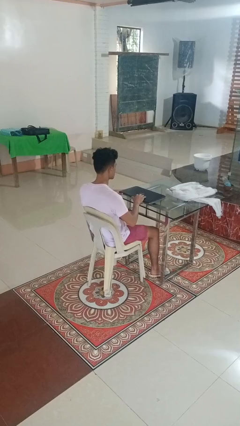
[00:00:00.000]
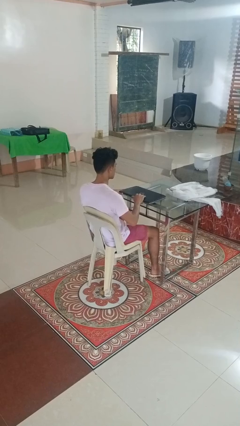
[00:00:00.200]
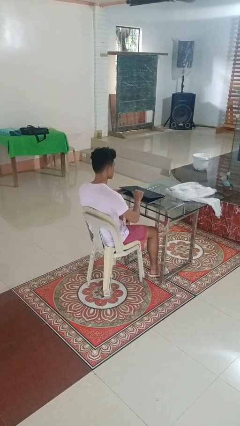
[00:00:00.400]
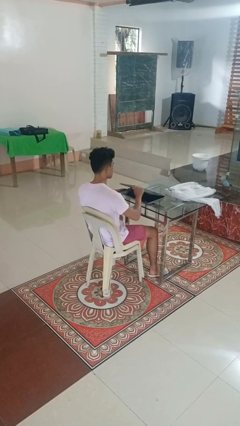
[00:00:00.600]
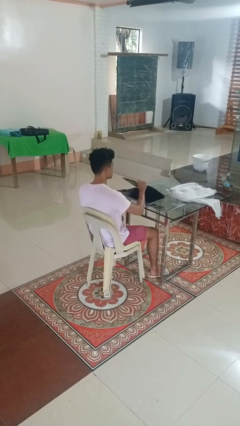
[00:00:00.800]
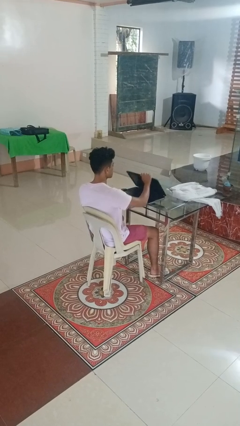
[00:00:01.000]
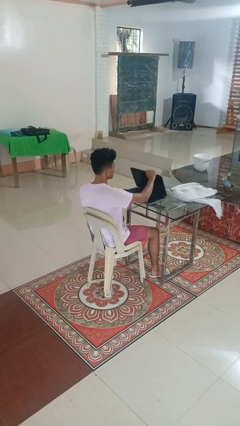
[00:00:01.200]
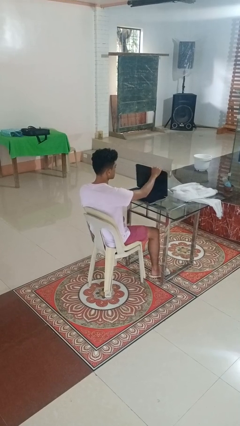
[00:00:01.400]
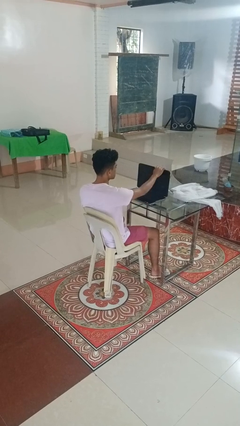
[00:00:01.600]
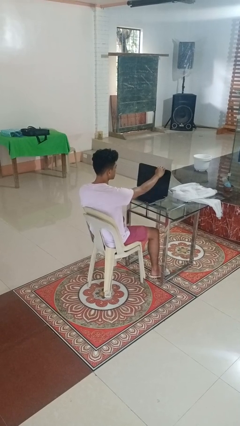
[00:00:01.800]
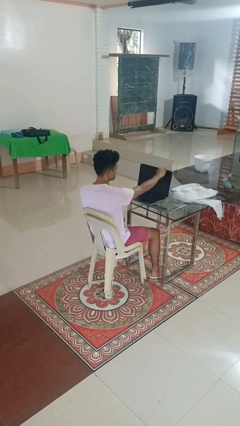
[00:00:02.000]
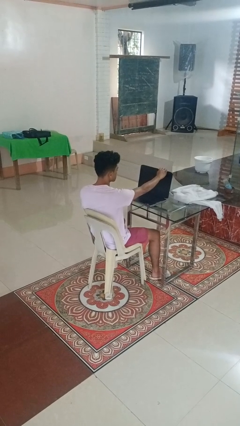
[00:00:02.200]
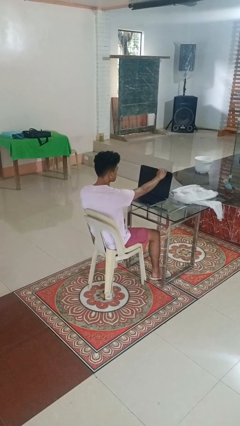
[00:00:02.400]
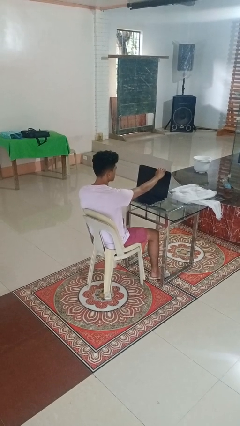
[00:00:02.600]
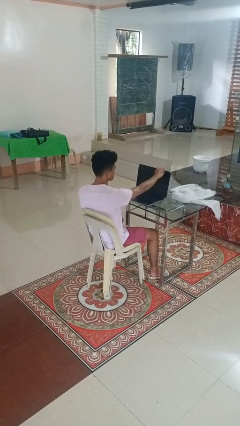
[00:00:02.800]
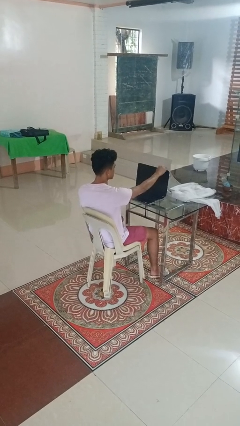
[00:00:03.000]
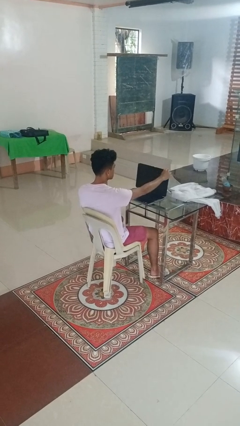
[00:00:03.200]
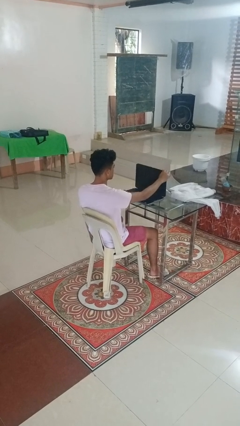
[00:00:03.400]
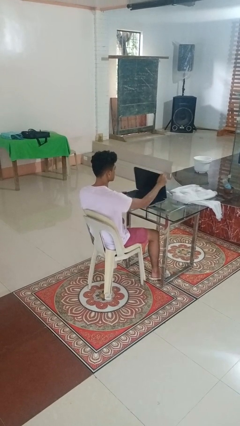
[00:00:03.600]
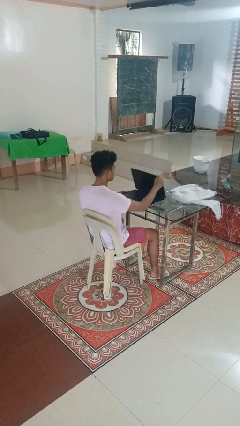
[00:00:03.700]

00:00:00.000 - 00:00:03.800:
person opens laptop

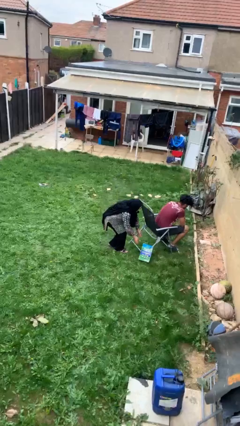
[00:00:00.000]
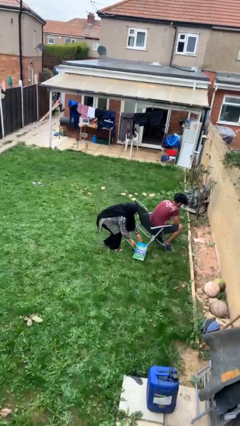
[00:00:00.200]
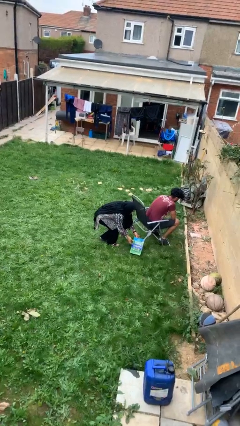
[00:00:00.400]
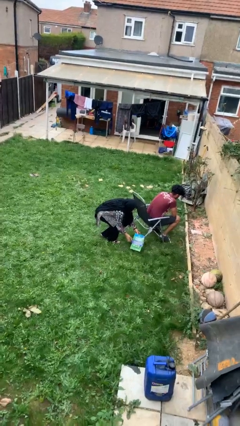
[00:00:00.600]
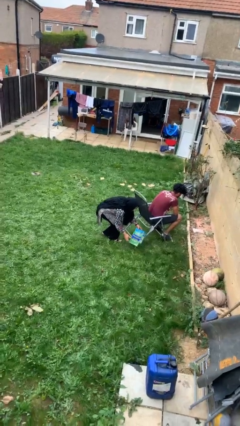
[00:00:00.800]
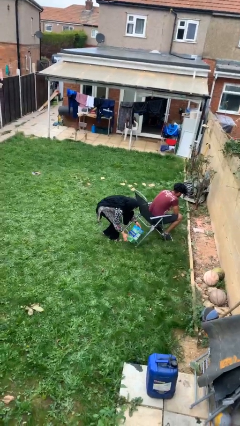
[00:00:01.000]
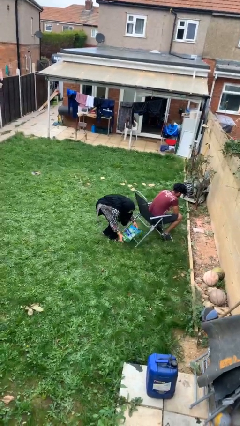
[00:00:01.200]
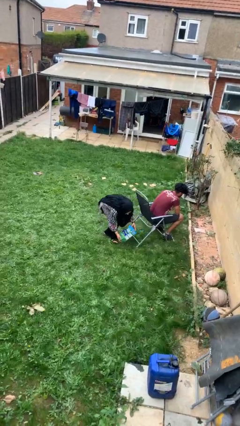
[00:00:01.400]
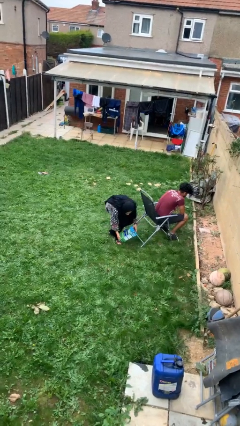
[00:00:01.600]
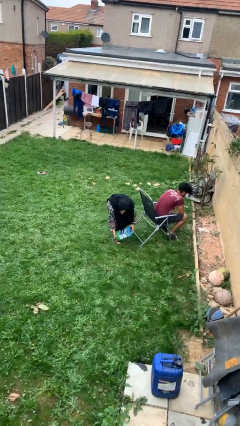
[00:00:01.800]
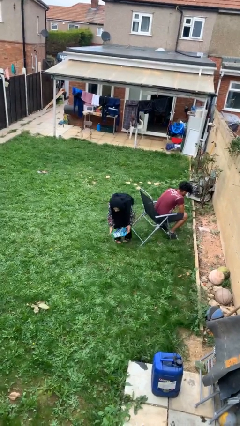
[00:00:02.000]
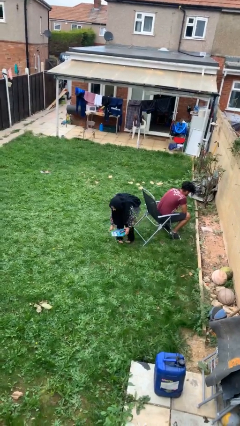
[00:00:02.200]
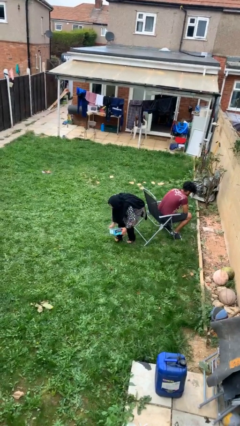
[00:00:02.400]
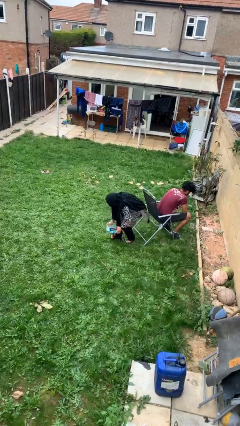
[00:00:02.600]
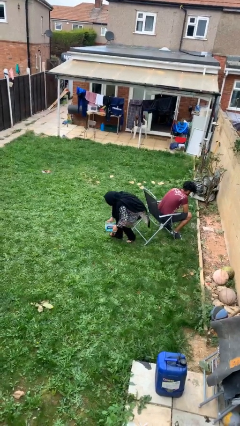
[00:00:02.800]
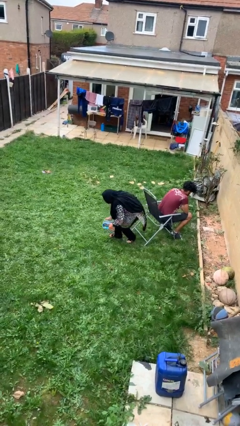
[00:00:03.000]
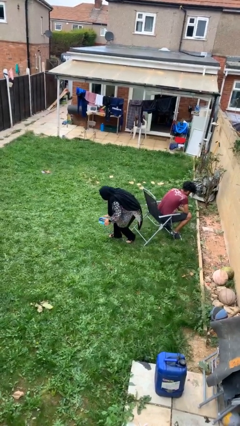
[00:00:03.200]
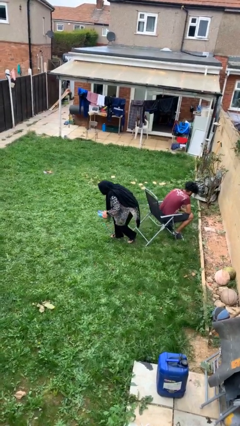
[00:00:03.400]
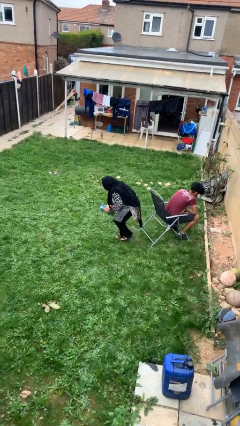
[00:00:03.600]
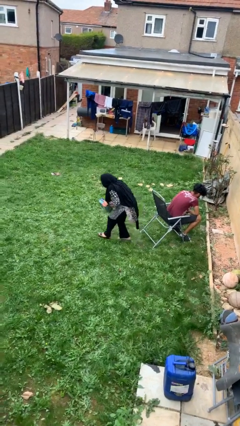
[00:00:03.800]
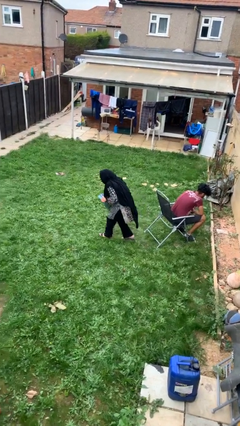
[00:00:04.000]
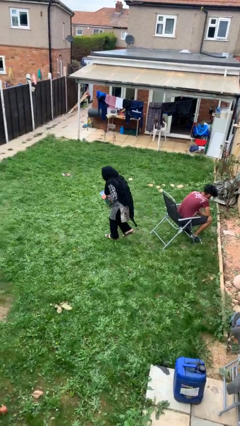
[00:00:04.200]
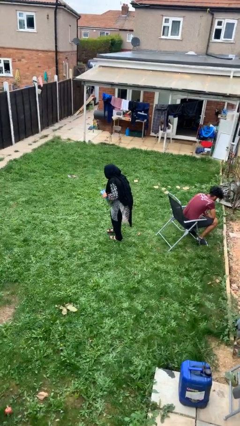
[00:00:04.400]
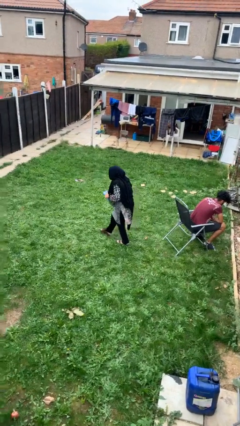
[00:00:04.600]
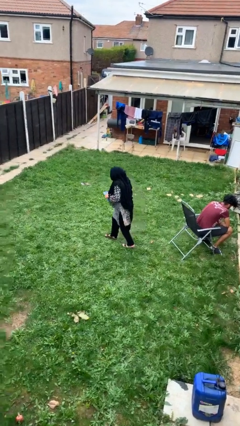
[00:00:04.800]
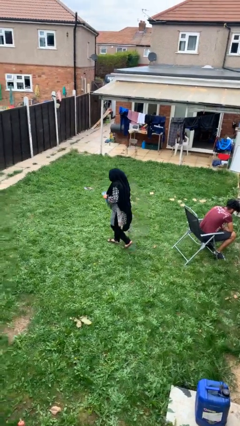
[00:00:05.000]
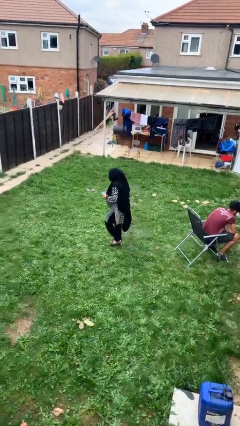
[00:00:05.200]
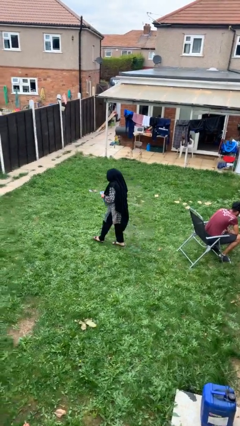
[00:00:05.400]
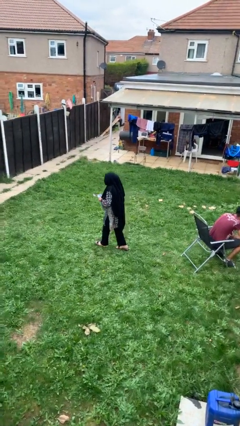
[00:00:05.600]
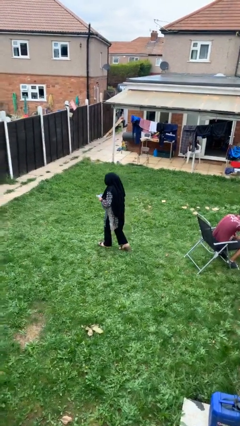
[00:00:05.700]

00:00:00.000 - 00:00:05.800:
person steals object from person

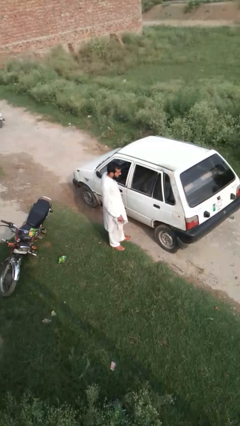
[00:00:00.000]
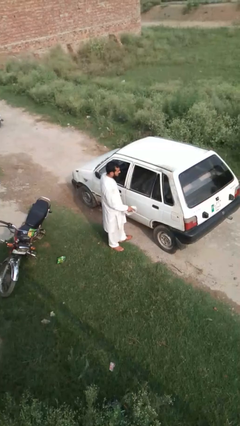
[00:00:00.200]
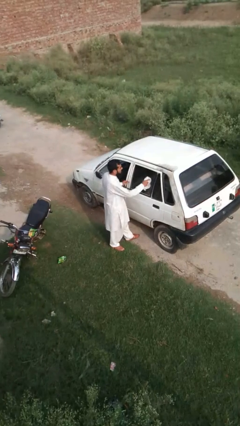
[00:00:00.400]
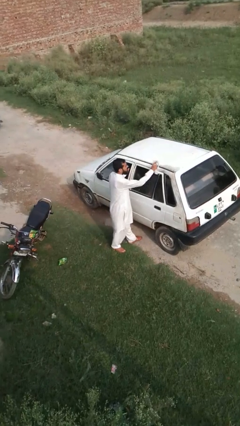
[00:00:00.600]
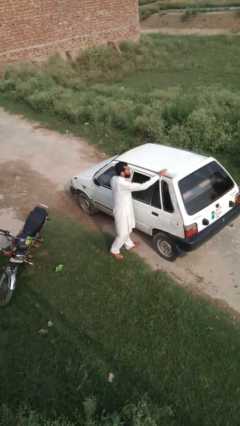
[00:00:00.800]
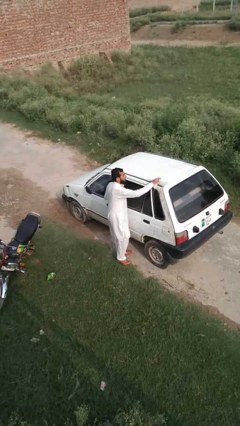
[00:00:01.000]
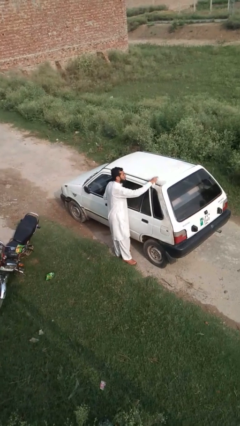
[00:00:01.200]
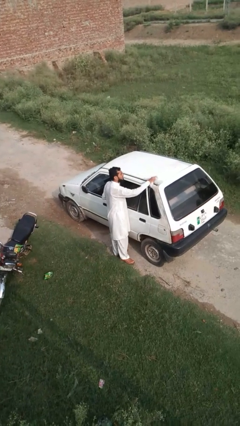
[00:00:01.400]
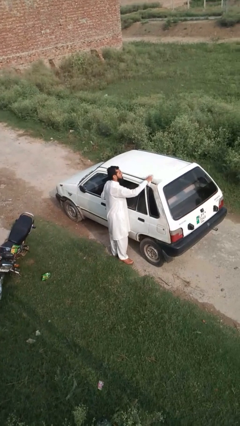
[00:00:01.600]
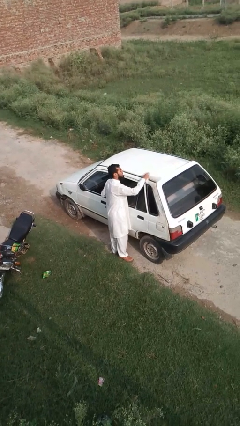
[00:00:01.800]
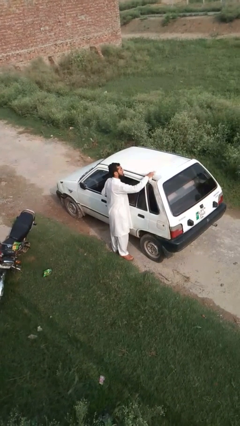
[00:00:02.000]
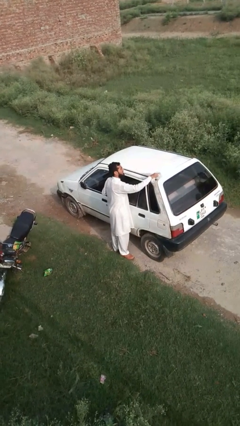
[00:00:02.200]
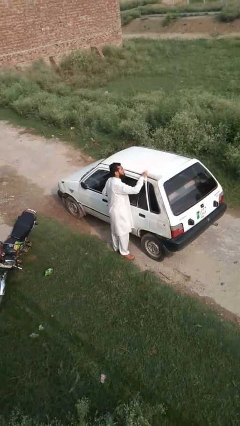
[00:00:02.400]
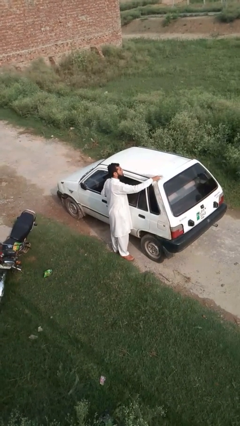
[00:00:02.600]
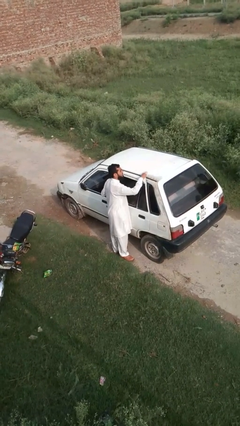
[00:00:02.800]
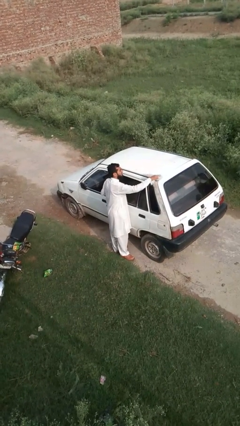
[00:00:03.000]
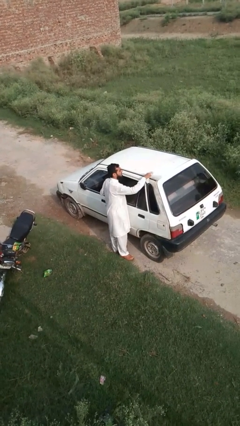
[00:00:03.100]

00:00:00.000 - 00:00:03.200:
person polishes car with rag

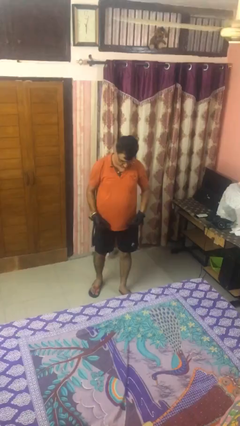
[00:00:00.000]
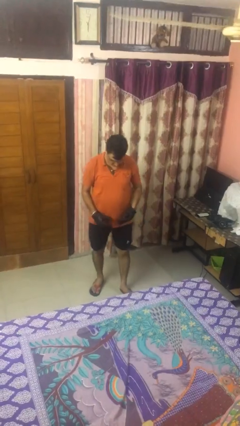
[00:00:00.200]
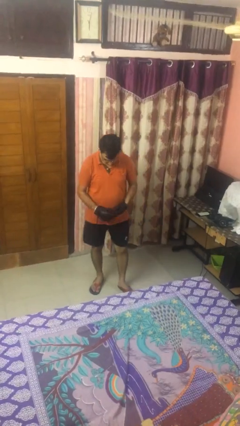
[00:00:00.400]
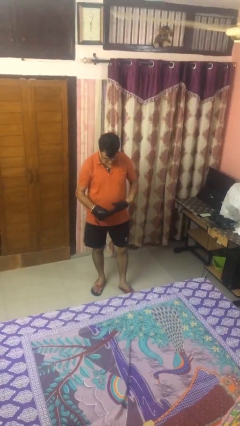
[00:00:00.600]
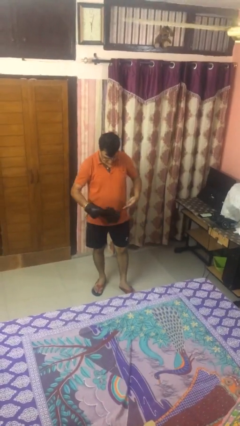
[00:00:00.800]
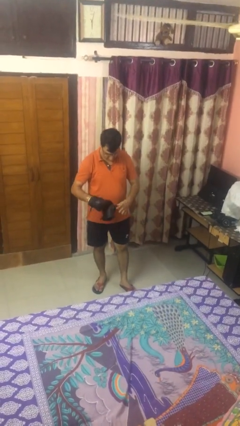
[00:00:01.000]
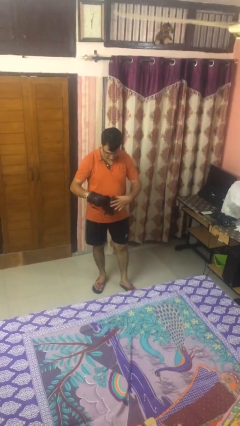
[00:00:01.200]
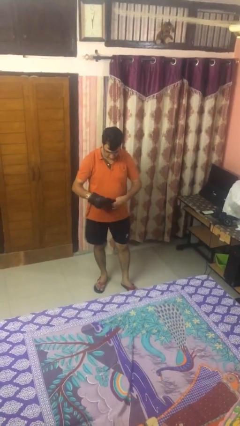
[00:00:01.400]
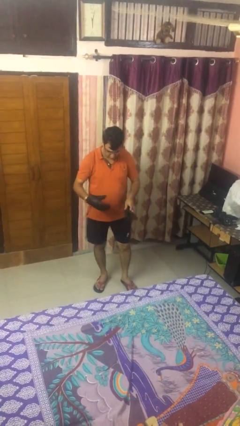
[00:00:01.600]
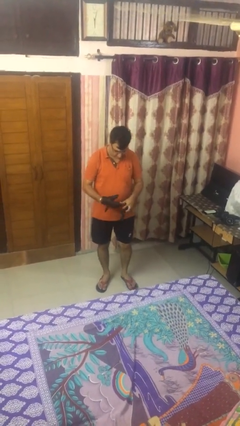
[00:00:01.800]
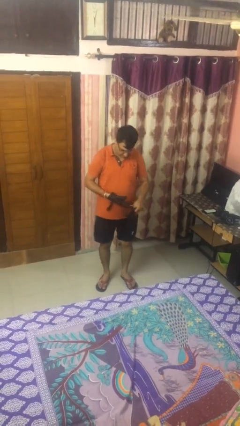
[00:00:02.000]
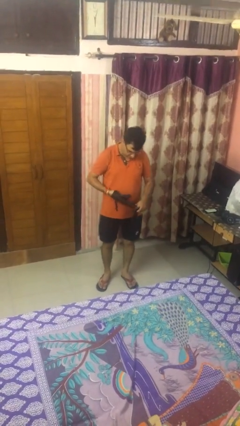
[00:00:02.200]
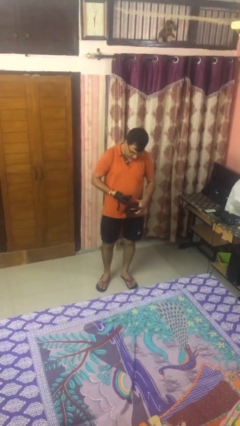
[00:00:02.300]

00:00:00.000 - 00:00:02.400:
person takes off gloves

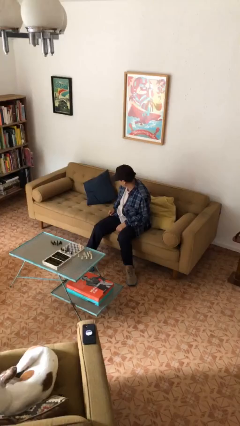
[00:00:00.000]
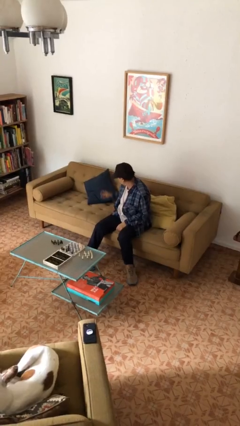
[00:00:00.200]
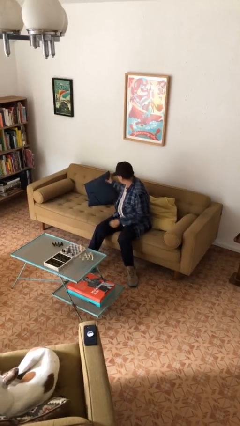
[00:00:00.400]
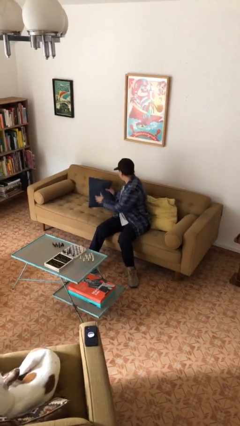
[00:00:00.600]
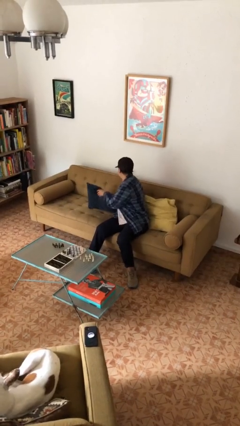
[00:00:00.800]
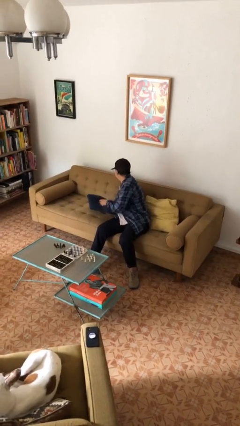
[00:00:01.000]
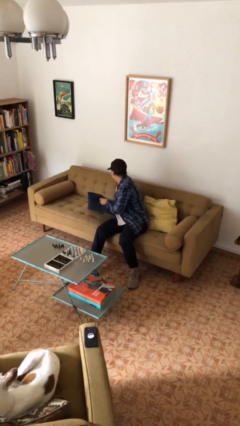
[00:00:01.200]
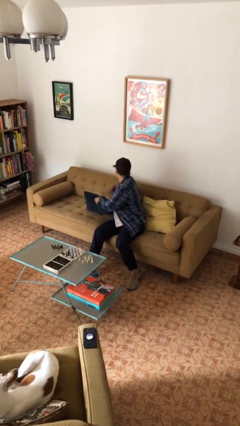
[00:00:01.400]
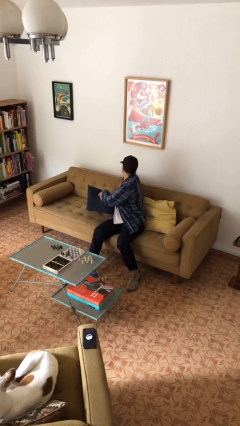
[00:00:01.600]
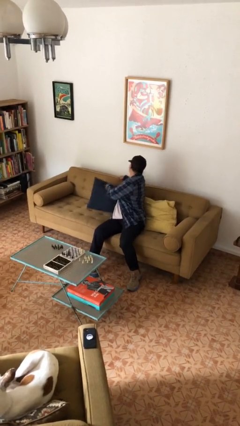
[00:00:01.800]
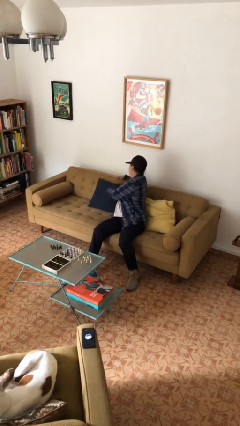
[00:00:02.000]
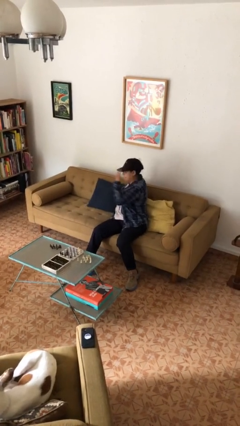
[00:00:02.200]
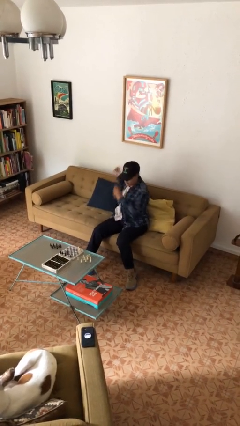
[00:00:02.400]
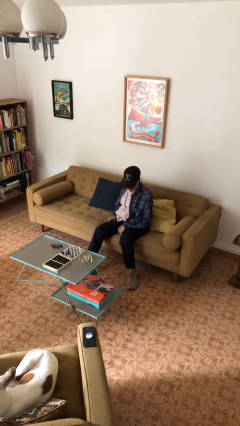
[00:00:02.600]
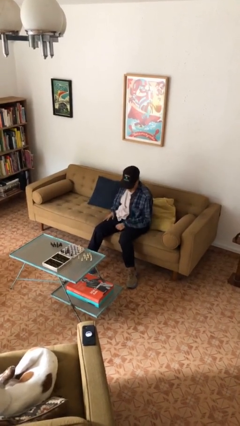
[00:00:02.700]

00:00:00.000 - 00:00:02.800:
person searches in couch
